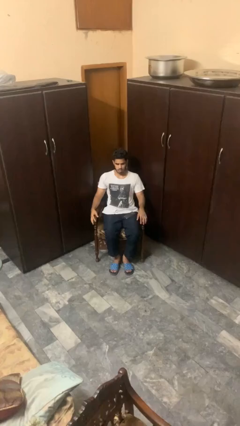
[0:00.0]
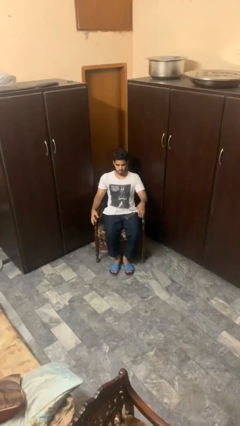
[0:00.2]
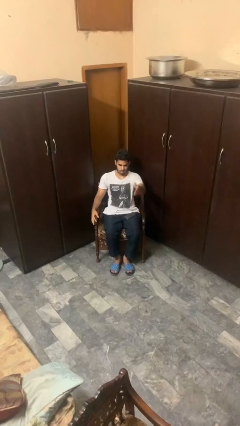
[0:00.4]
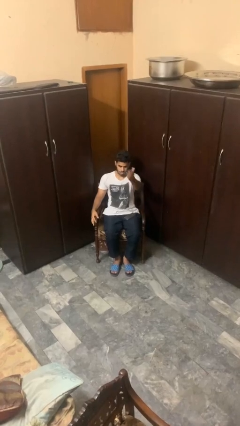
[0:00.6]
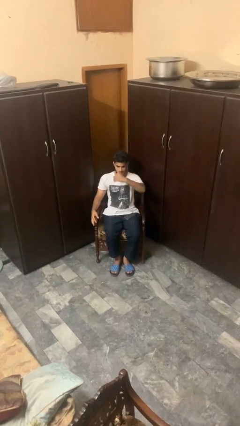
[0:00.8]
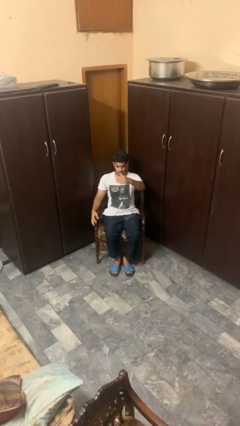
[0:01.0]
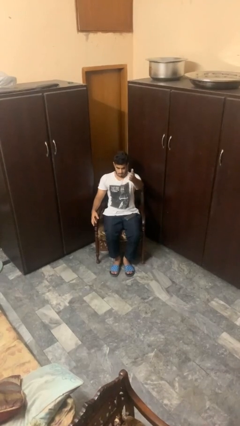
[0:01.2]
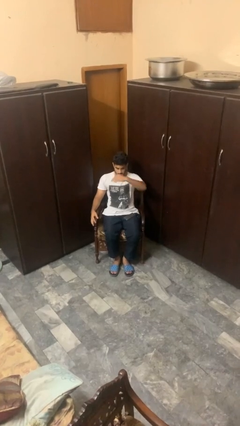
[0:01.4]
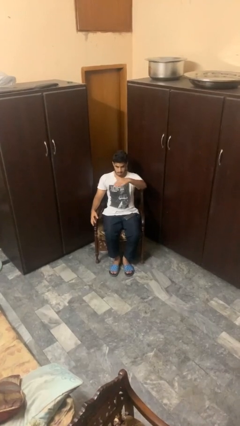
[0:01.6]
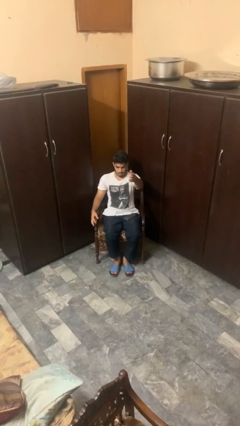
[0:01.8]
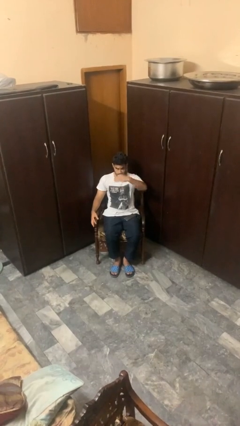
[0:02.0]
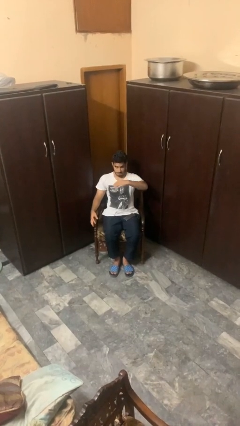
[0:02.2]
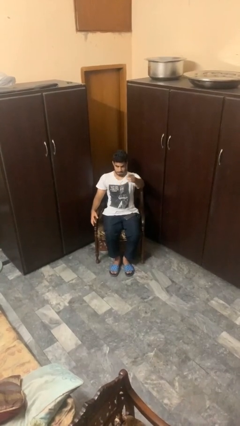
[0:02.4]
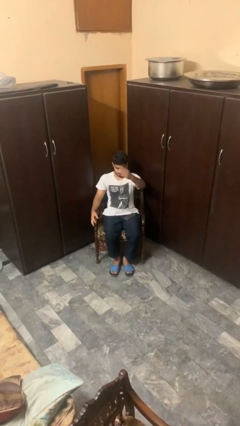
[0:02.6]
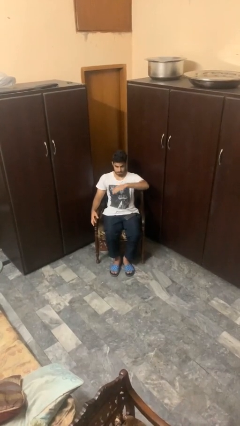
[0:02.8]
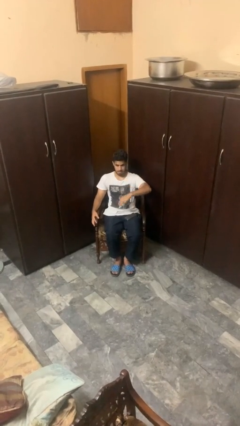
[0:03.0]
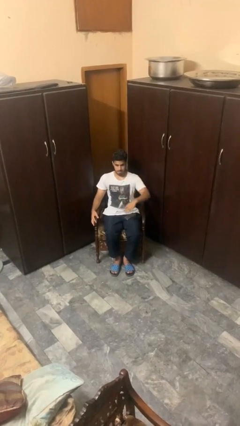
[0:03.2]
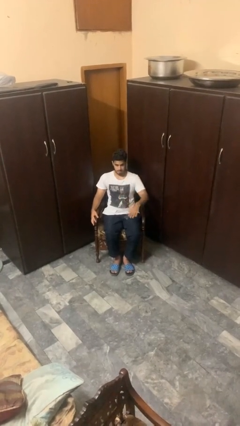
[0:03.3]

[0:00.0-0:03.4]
person gestures come here

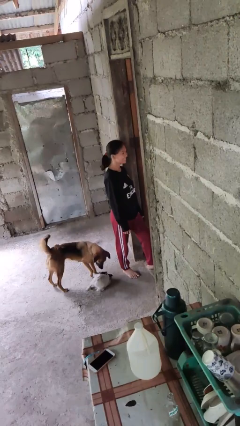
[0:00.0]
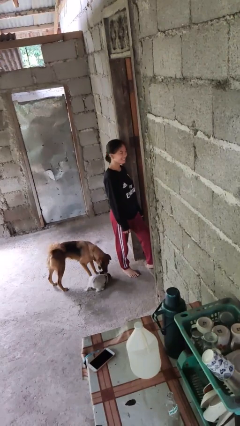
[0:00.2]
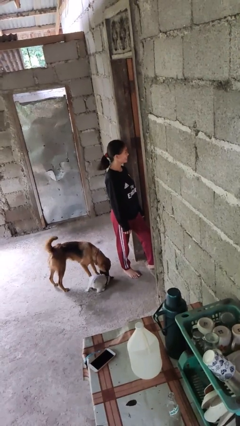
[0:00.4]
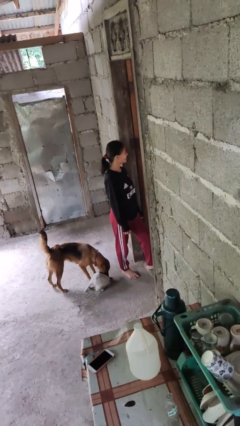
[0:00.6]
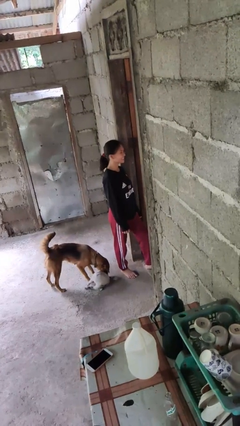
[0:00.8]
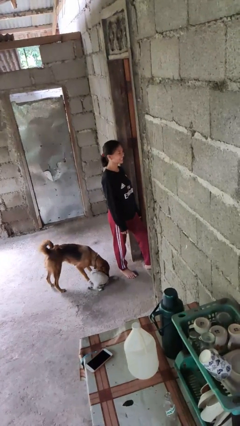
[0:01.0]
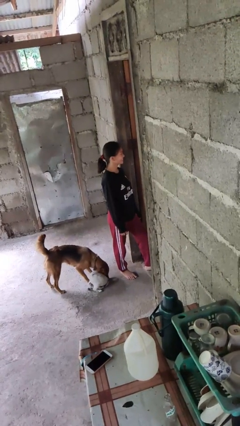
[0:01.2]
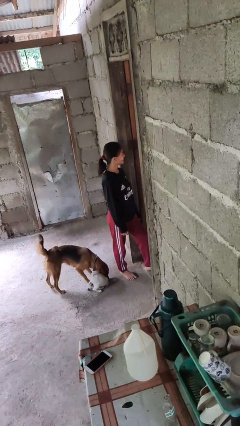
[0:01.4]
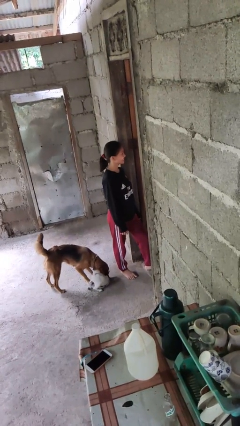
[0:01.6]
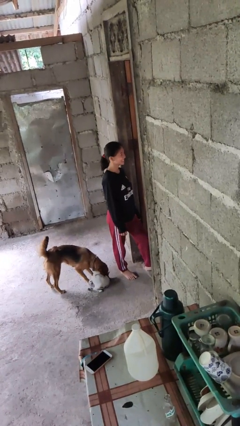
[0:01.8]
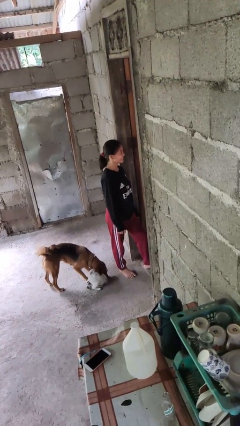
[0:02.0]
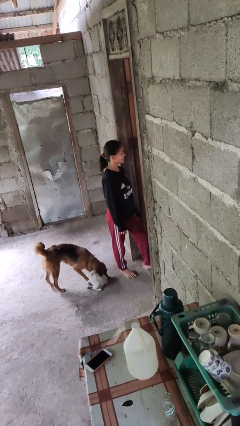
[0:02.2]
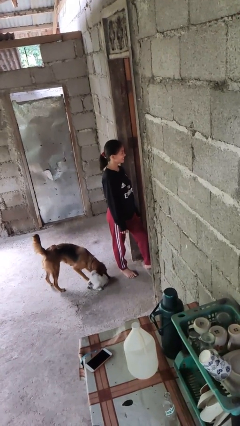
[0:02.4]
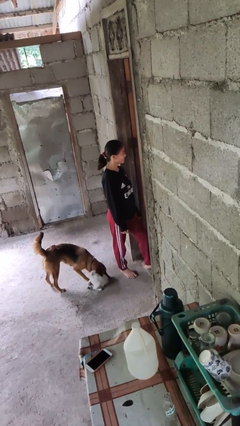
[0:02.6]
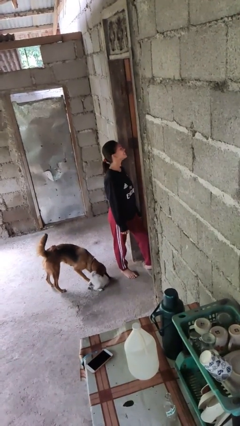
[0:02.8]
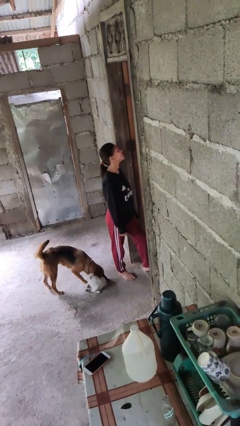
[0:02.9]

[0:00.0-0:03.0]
person shakes head

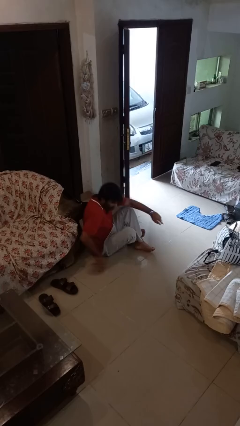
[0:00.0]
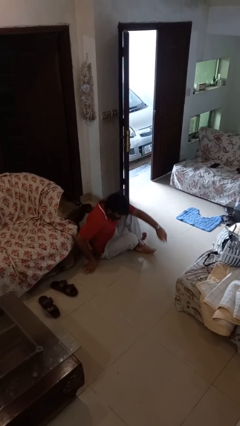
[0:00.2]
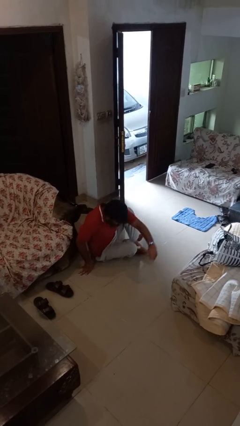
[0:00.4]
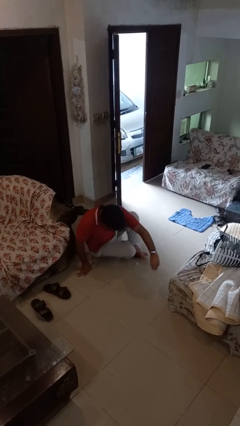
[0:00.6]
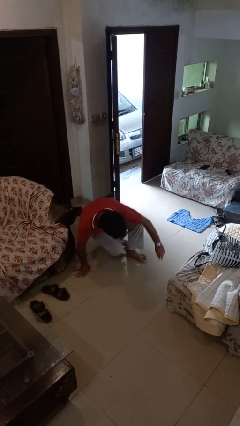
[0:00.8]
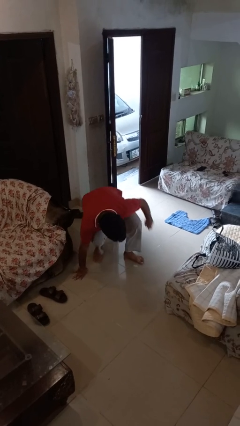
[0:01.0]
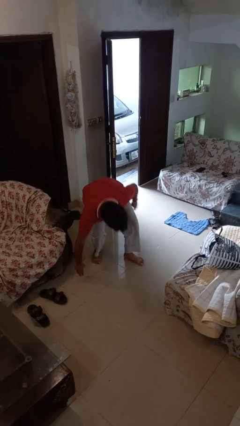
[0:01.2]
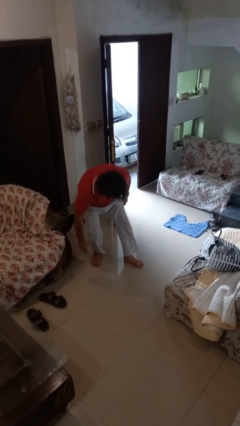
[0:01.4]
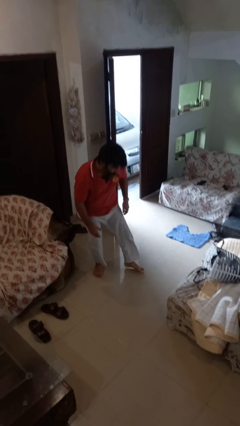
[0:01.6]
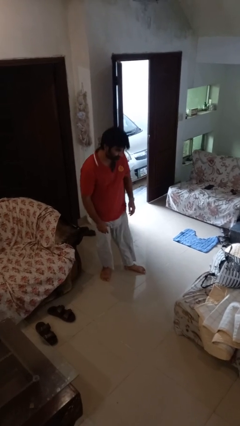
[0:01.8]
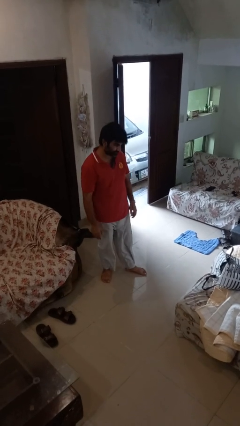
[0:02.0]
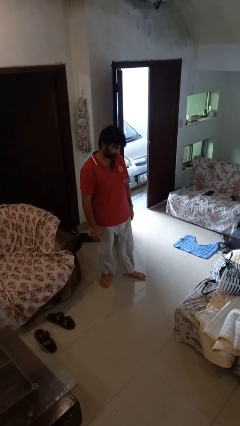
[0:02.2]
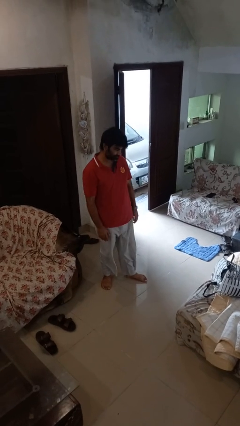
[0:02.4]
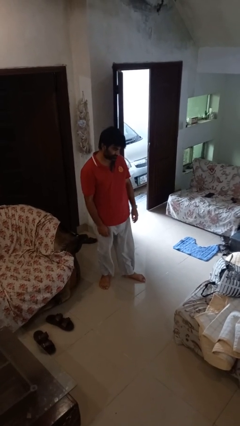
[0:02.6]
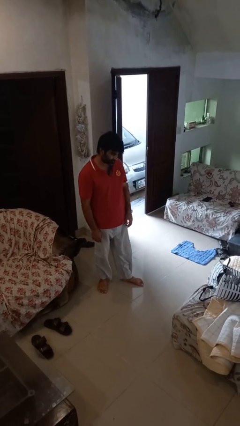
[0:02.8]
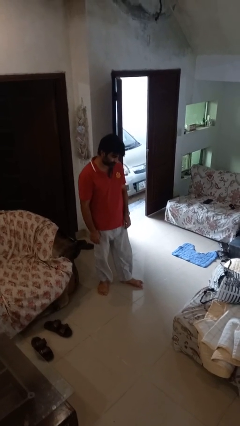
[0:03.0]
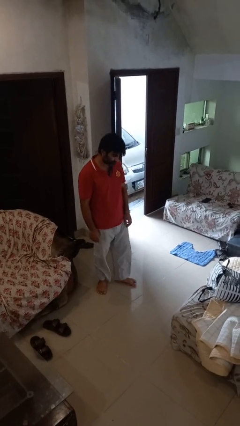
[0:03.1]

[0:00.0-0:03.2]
person stands up from floor

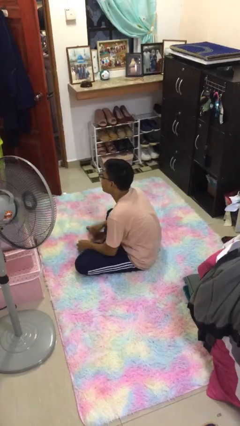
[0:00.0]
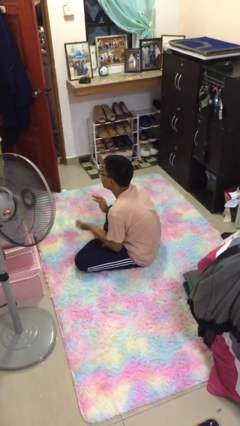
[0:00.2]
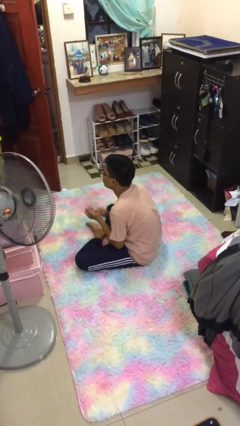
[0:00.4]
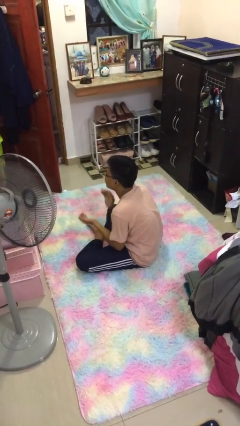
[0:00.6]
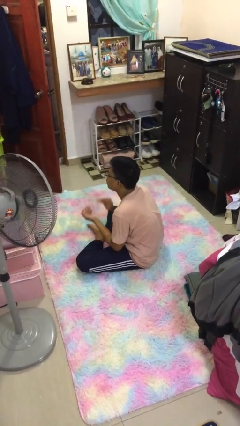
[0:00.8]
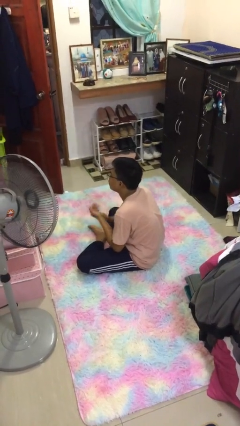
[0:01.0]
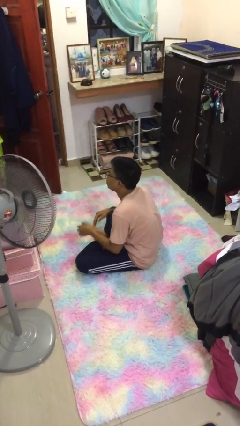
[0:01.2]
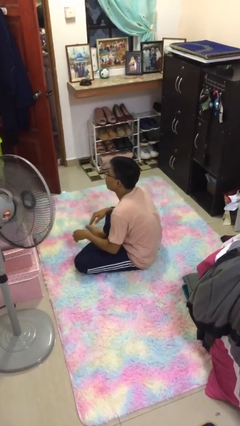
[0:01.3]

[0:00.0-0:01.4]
person claps hands

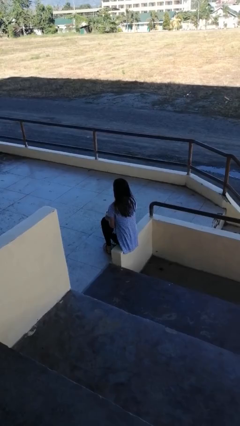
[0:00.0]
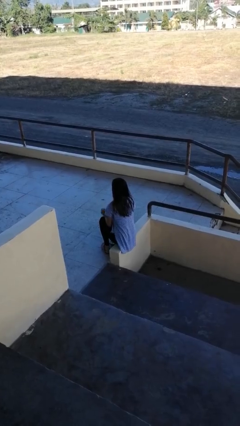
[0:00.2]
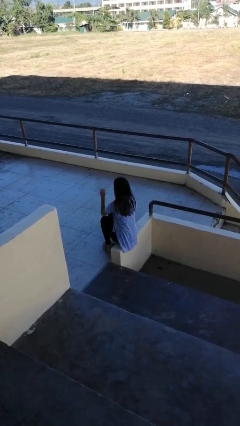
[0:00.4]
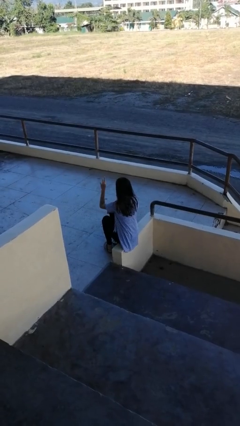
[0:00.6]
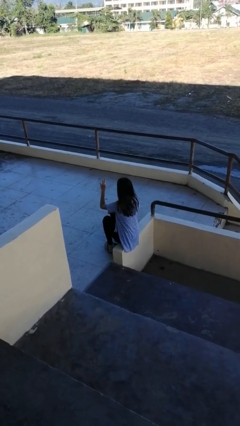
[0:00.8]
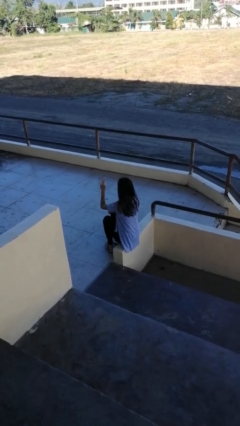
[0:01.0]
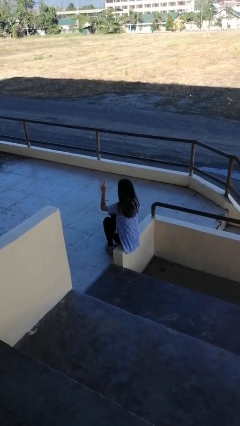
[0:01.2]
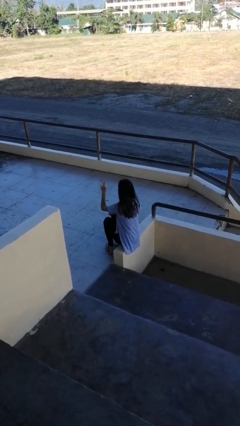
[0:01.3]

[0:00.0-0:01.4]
person gestures number three

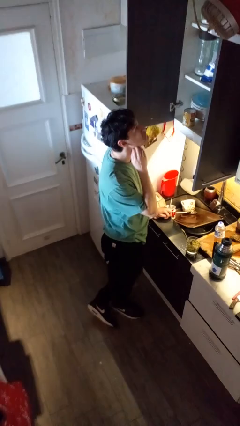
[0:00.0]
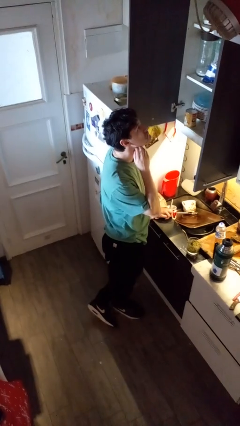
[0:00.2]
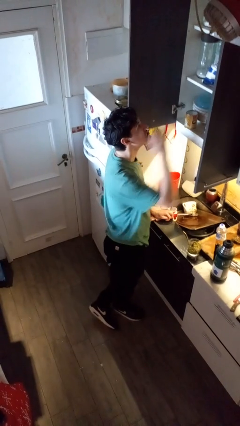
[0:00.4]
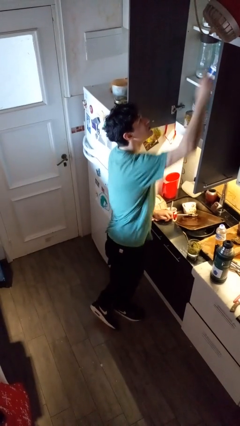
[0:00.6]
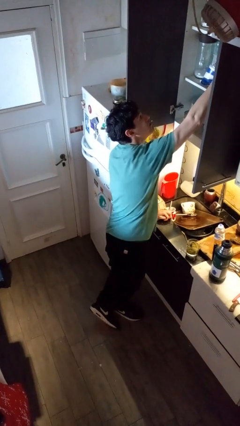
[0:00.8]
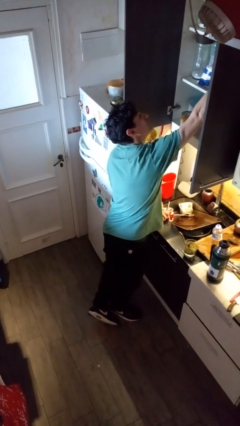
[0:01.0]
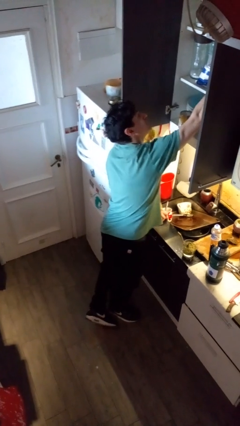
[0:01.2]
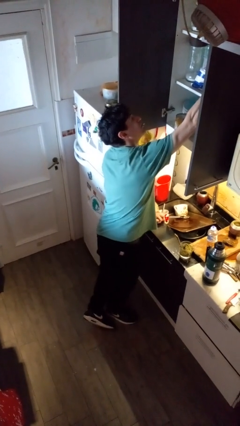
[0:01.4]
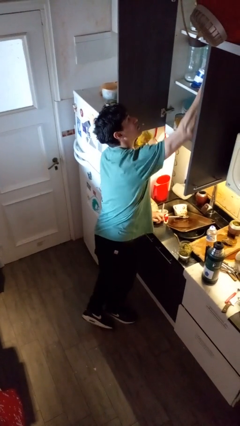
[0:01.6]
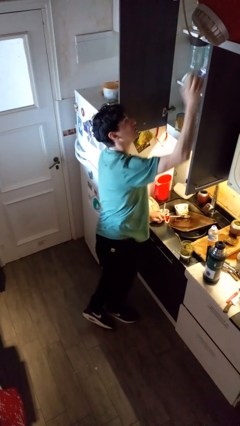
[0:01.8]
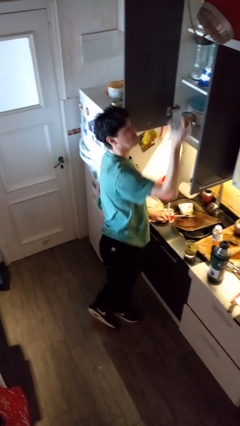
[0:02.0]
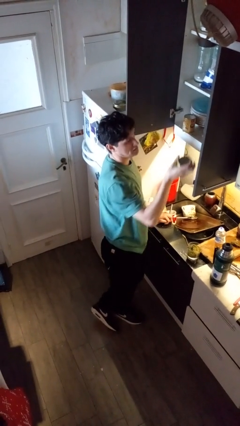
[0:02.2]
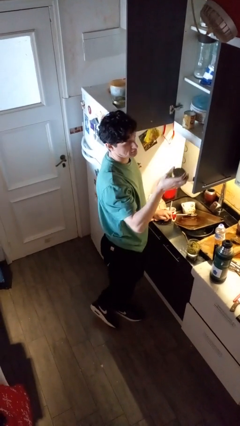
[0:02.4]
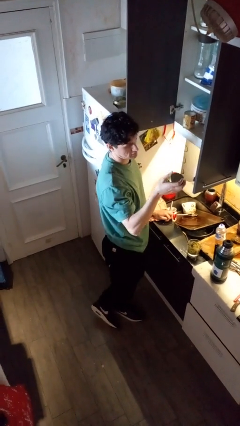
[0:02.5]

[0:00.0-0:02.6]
person takes object from kitchen drawer

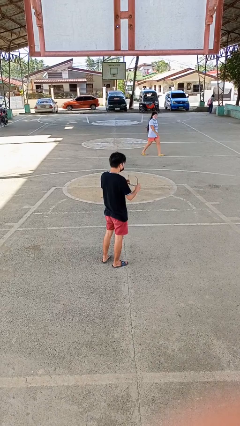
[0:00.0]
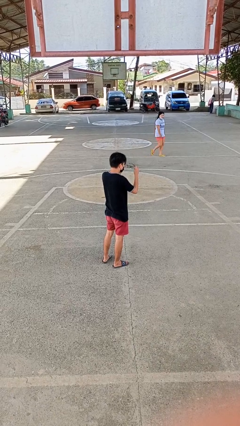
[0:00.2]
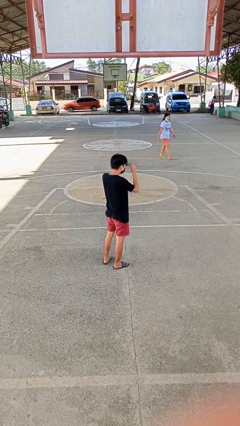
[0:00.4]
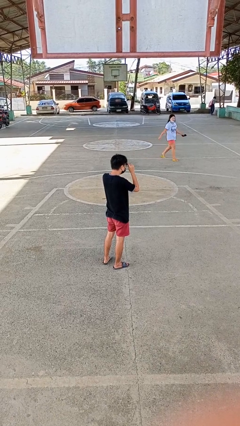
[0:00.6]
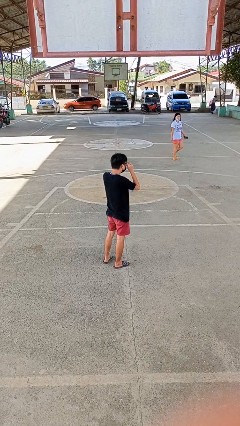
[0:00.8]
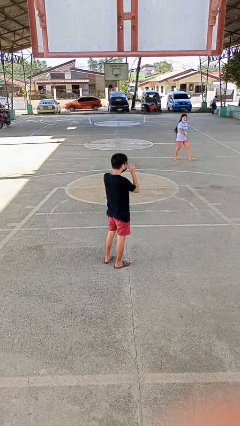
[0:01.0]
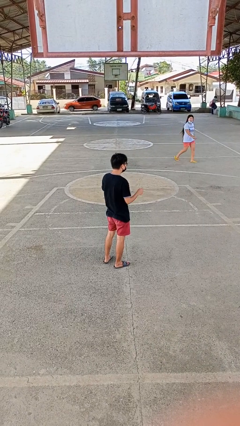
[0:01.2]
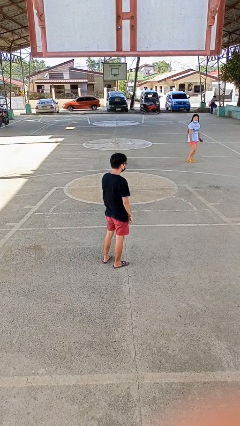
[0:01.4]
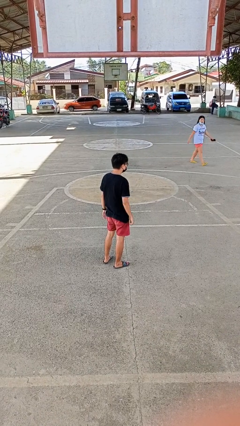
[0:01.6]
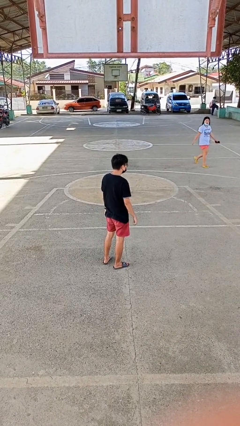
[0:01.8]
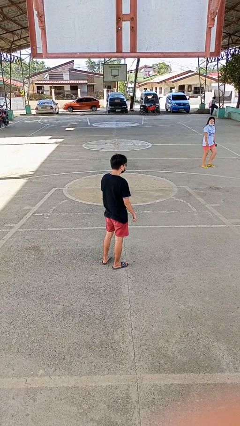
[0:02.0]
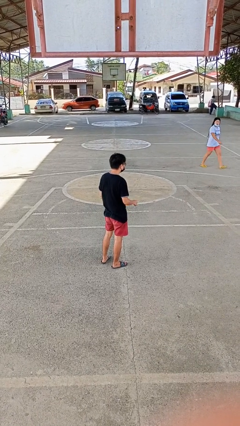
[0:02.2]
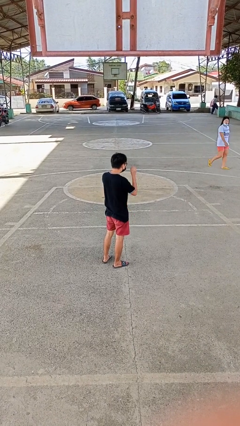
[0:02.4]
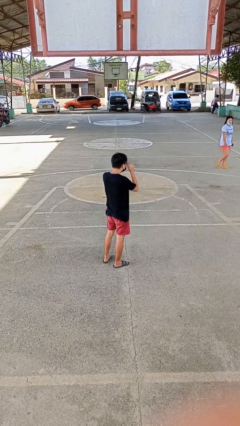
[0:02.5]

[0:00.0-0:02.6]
person puts on glasses
